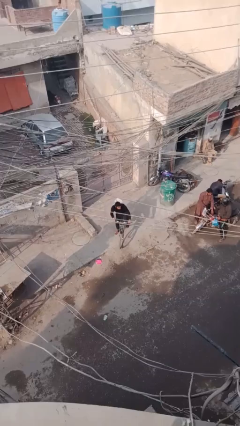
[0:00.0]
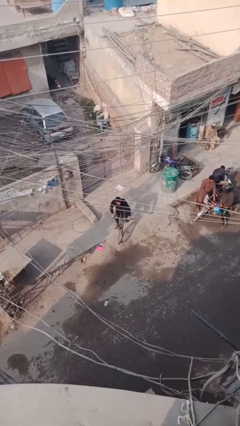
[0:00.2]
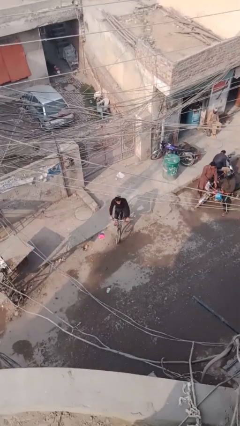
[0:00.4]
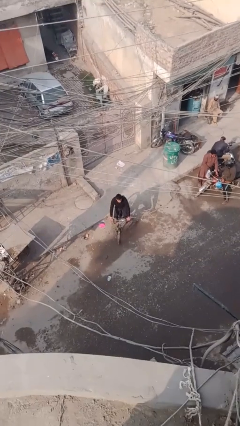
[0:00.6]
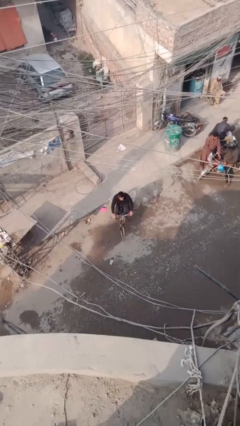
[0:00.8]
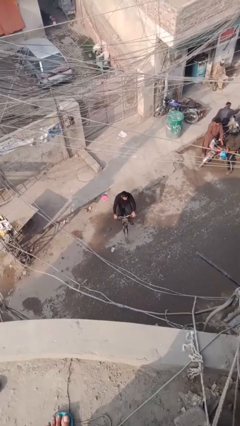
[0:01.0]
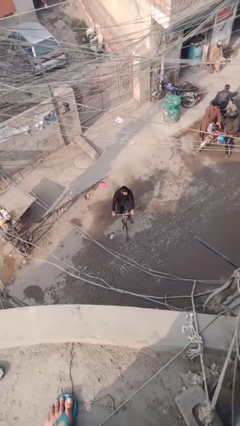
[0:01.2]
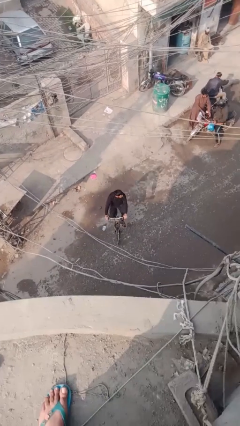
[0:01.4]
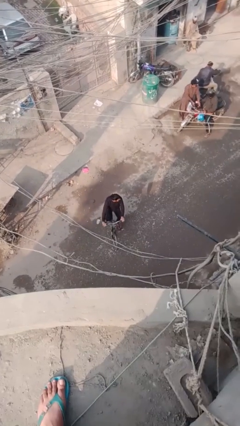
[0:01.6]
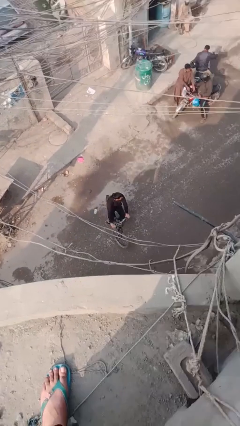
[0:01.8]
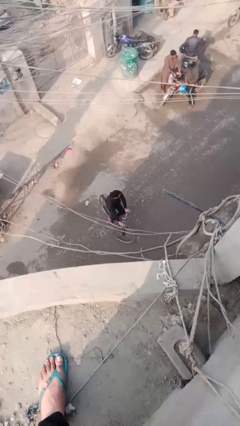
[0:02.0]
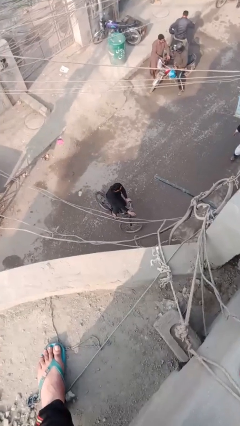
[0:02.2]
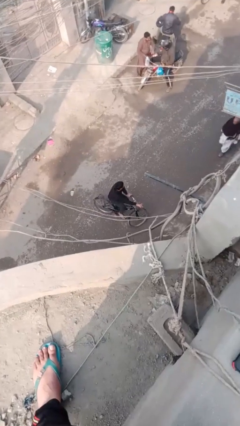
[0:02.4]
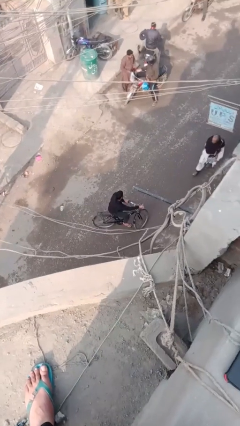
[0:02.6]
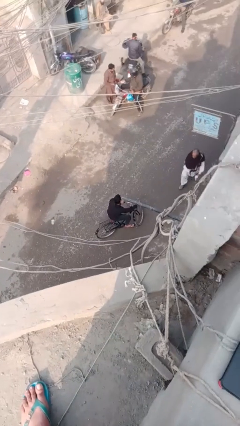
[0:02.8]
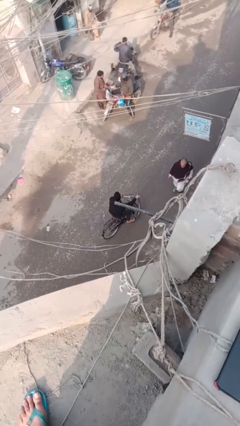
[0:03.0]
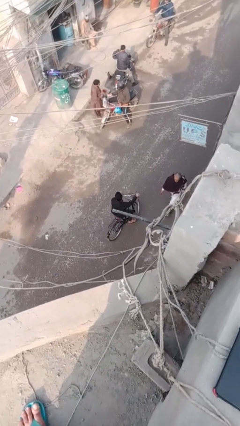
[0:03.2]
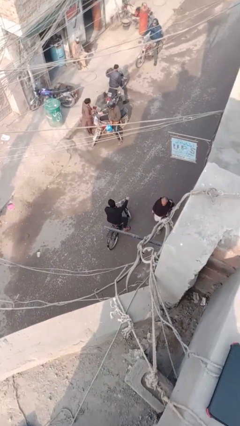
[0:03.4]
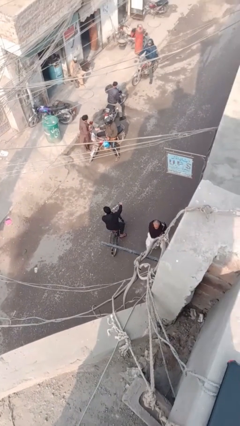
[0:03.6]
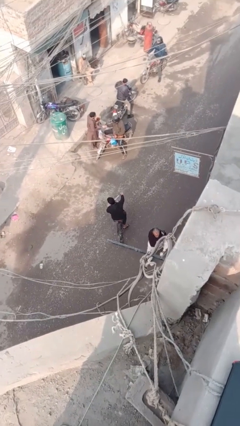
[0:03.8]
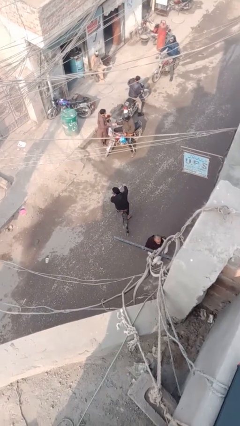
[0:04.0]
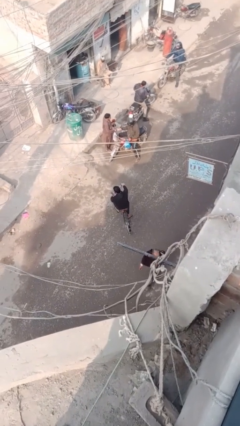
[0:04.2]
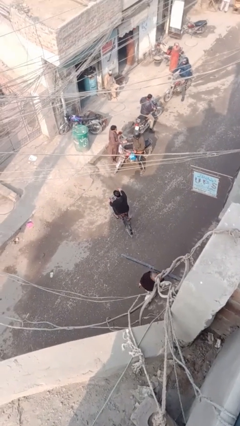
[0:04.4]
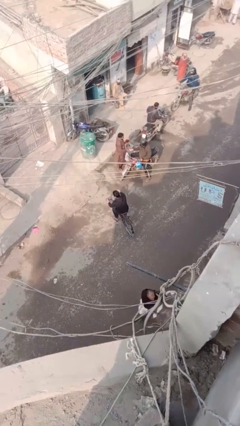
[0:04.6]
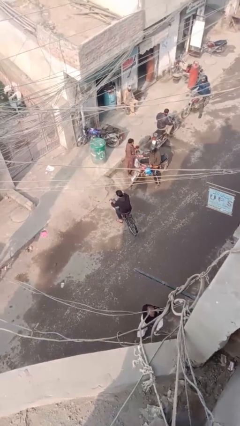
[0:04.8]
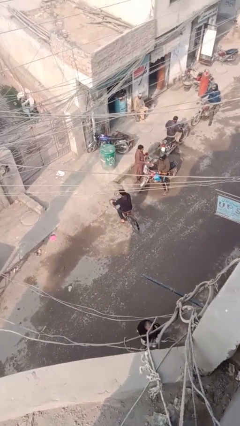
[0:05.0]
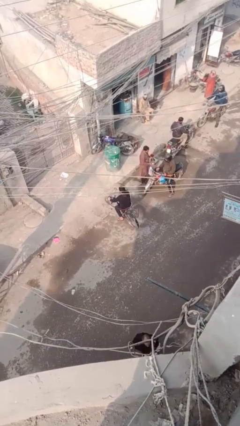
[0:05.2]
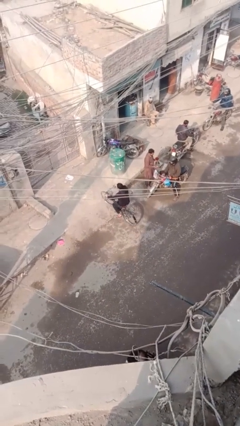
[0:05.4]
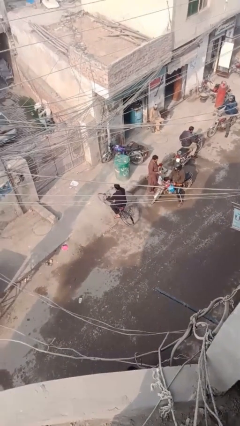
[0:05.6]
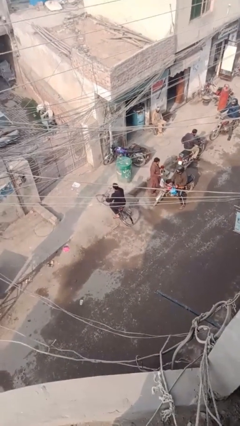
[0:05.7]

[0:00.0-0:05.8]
person rides bicycle

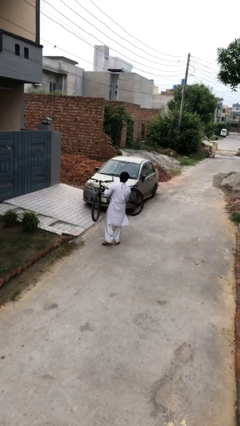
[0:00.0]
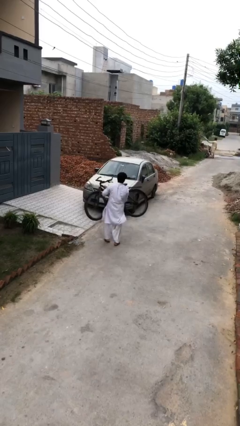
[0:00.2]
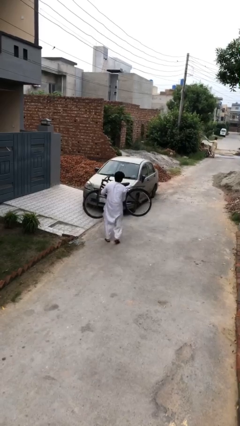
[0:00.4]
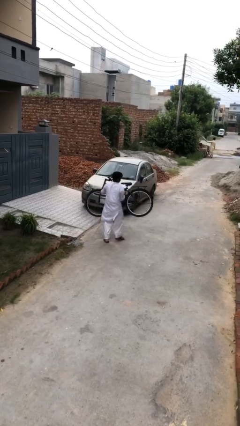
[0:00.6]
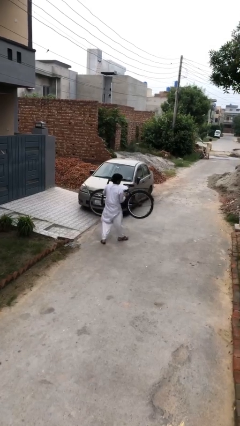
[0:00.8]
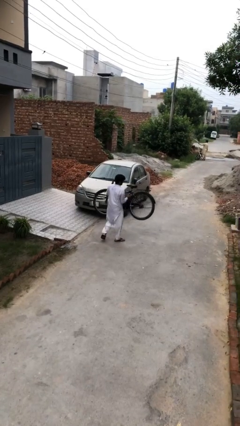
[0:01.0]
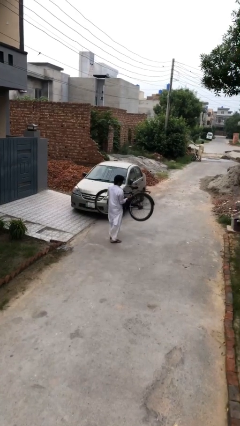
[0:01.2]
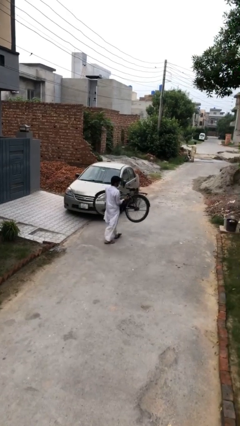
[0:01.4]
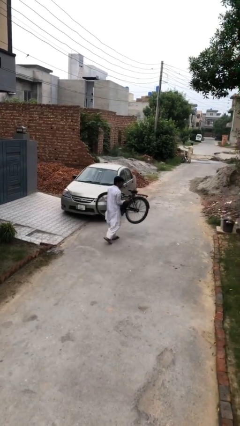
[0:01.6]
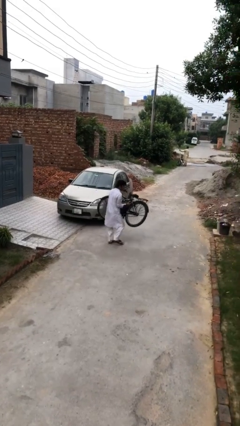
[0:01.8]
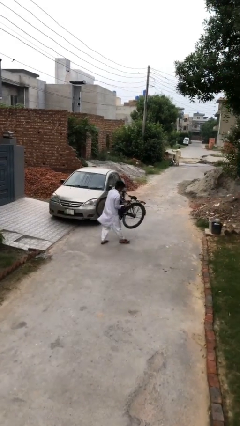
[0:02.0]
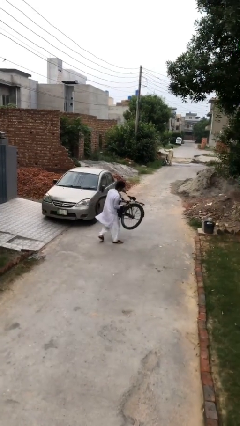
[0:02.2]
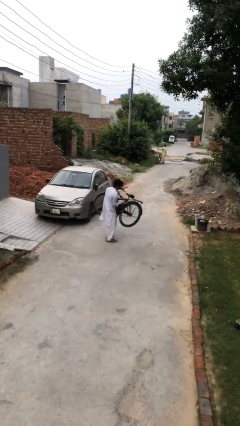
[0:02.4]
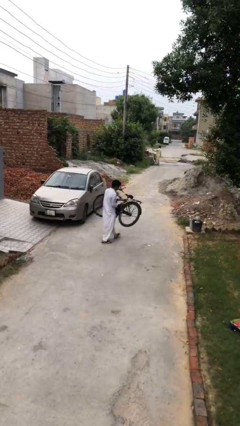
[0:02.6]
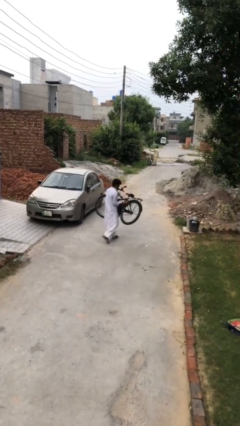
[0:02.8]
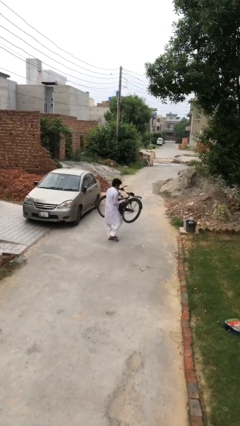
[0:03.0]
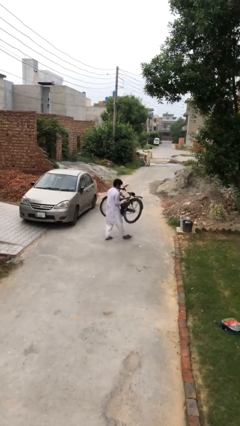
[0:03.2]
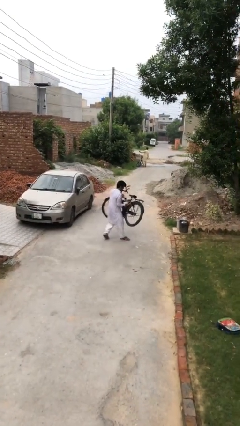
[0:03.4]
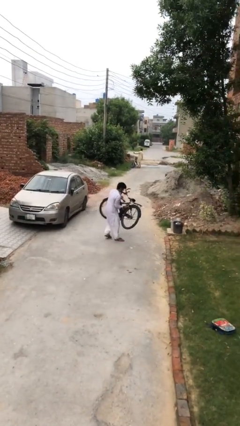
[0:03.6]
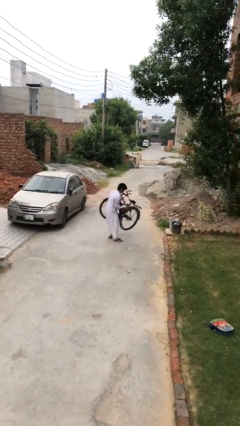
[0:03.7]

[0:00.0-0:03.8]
person carries heavy object

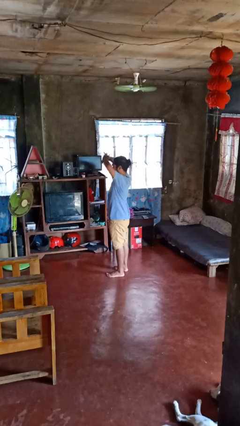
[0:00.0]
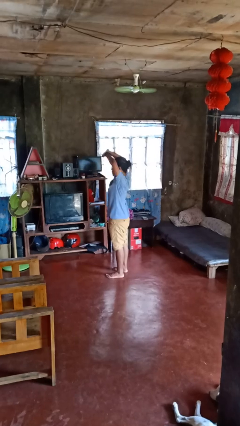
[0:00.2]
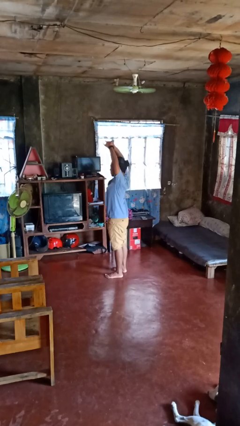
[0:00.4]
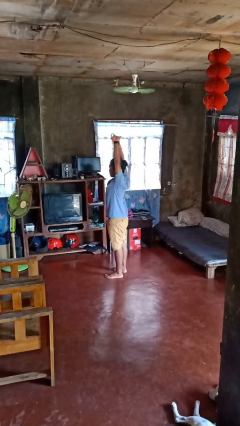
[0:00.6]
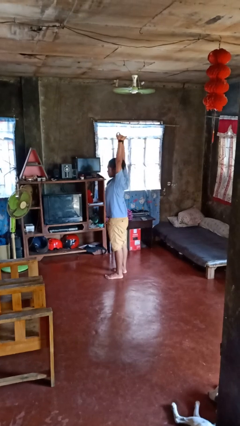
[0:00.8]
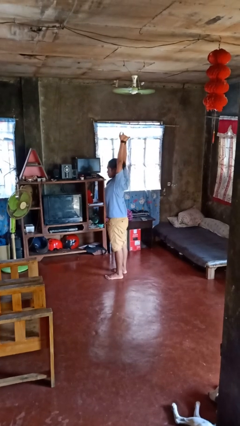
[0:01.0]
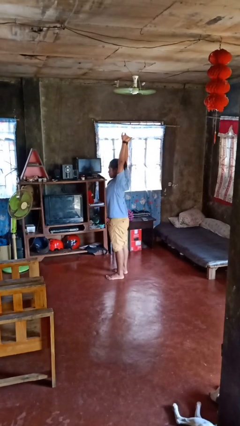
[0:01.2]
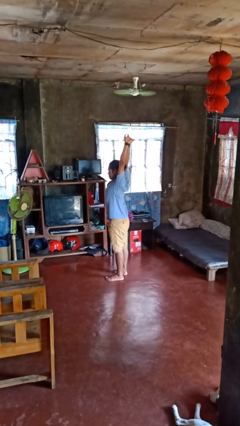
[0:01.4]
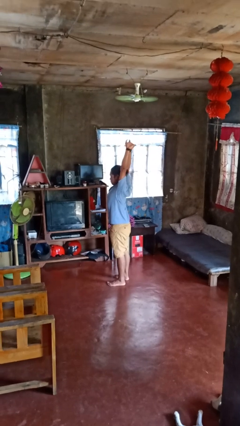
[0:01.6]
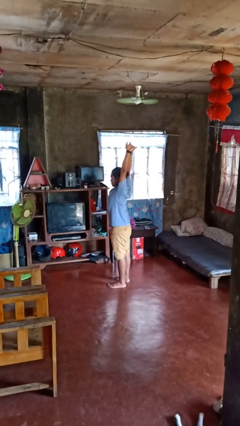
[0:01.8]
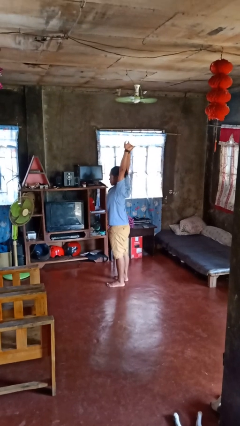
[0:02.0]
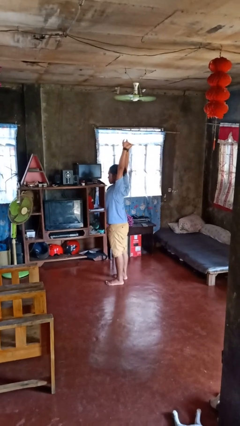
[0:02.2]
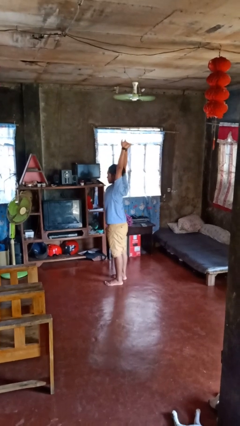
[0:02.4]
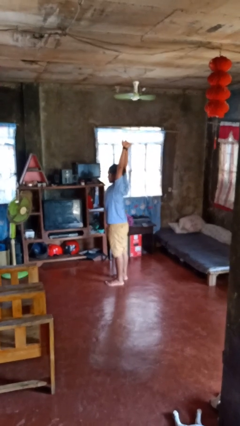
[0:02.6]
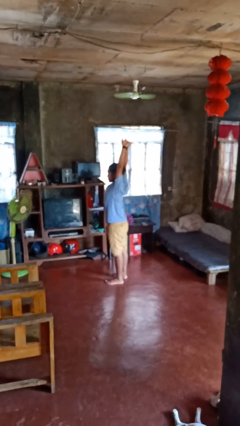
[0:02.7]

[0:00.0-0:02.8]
person stretches arms over head

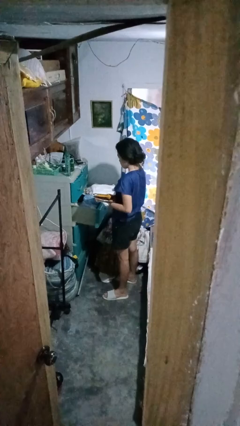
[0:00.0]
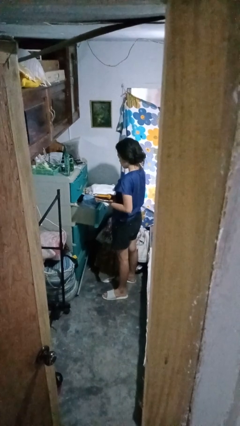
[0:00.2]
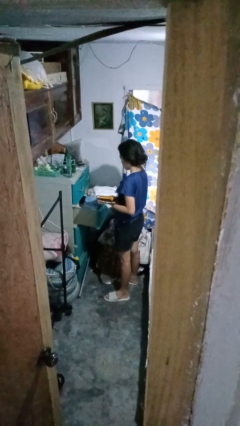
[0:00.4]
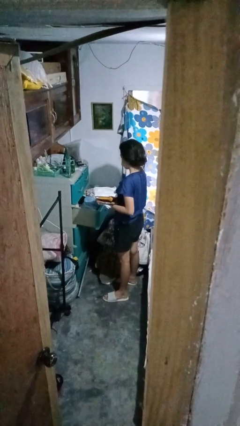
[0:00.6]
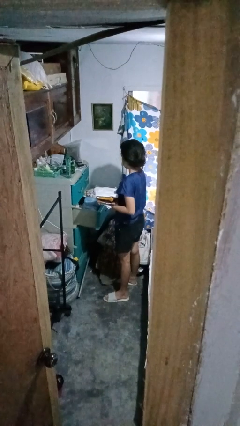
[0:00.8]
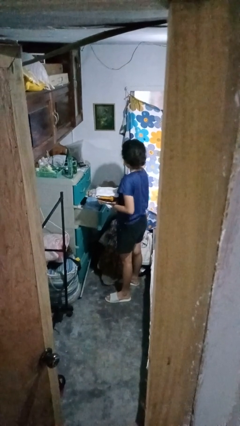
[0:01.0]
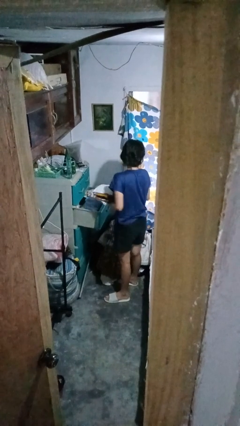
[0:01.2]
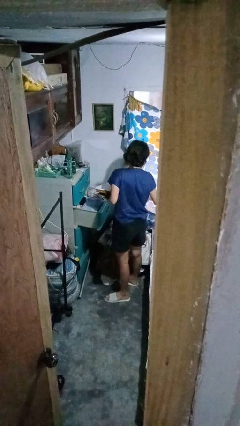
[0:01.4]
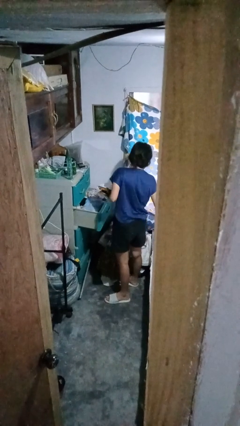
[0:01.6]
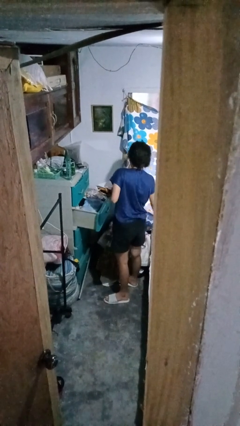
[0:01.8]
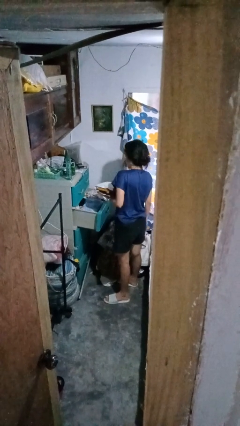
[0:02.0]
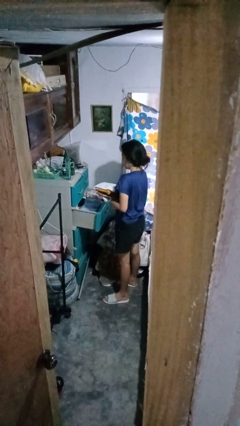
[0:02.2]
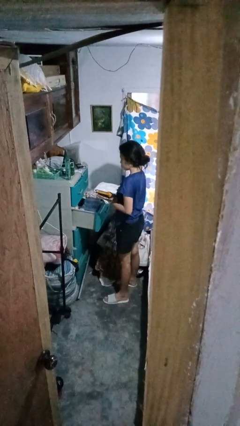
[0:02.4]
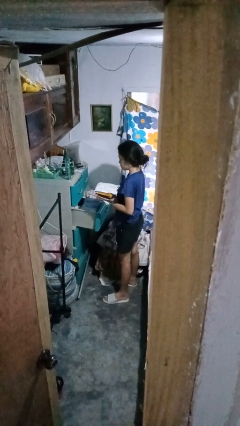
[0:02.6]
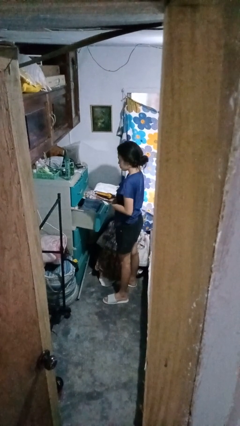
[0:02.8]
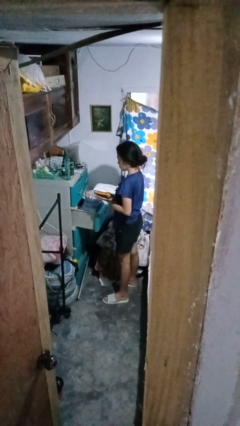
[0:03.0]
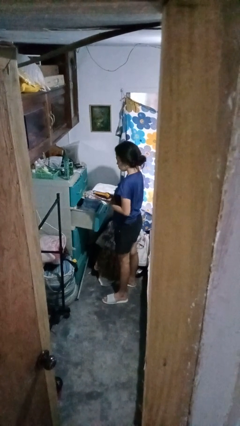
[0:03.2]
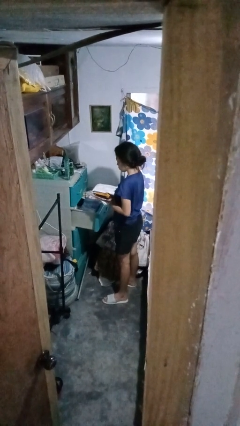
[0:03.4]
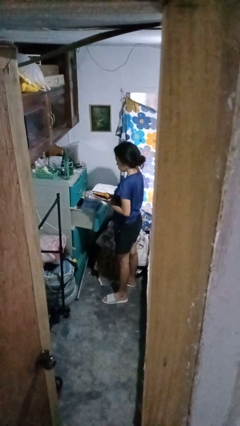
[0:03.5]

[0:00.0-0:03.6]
person takes clothes from dresser

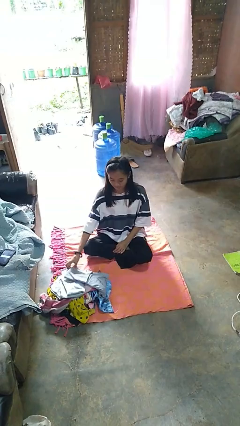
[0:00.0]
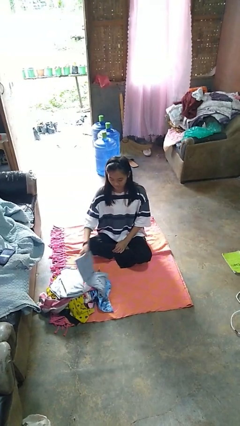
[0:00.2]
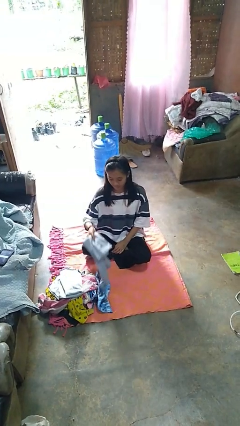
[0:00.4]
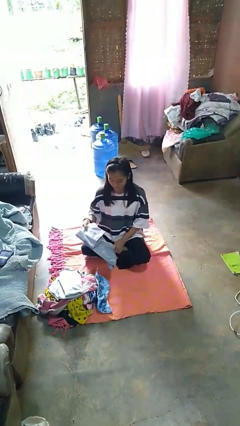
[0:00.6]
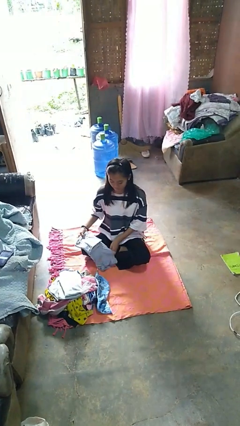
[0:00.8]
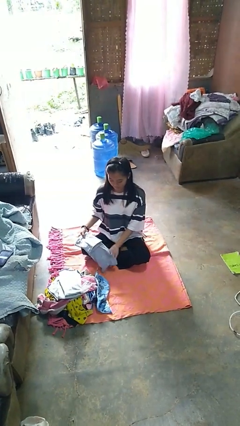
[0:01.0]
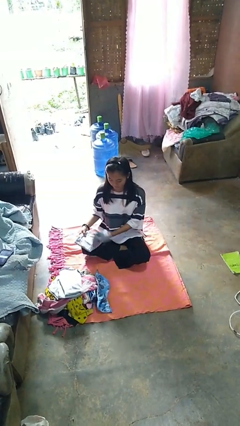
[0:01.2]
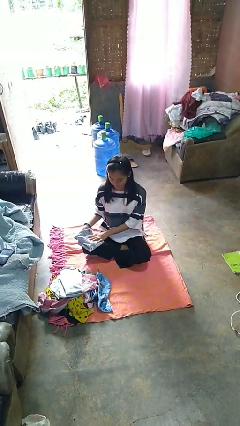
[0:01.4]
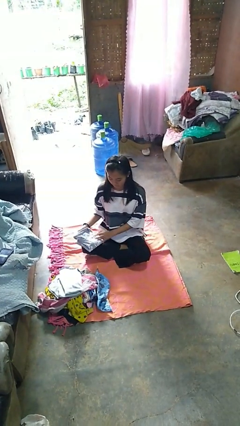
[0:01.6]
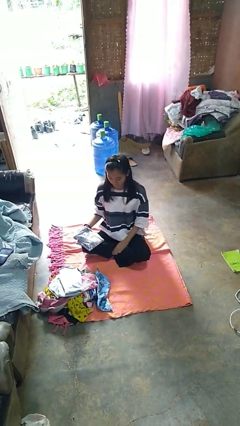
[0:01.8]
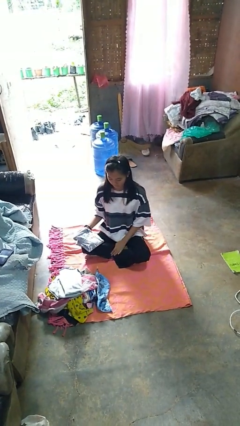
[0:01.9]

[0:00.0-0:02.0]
person folds shirt

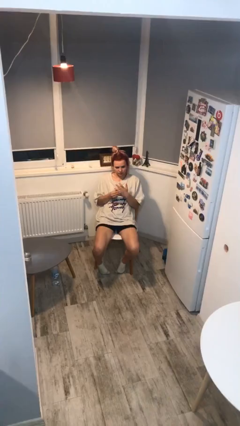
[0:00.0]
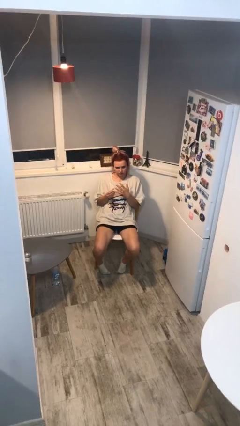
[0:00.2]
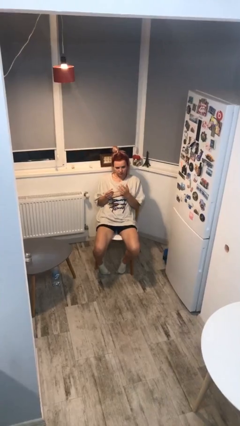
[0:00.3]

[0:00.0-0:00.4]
person takes off ring
